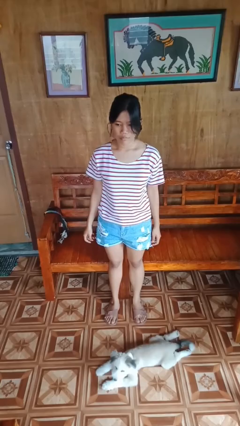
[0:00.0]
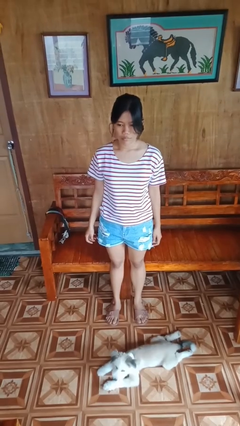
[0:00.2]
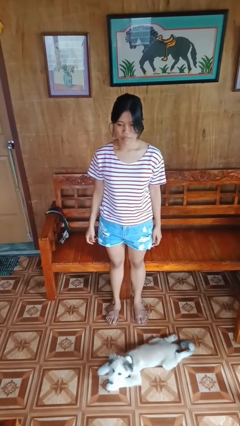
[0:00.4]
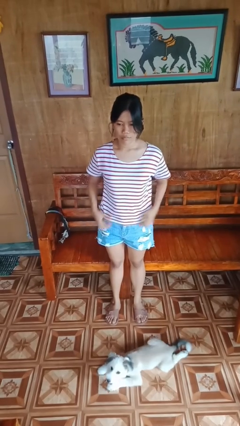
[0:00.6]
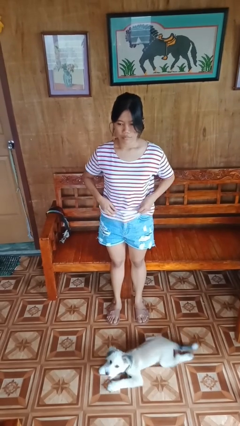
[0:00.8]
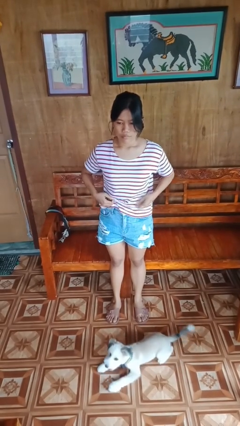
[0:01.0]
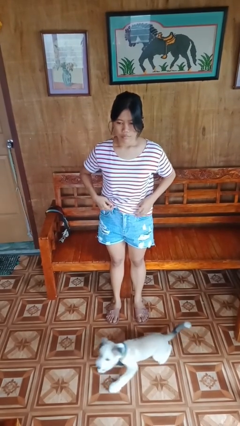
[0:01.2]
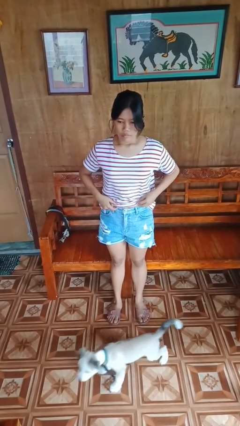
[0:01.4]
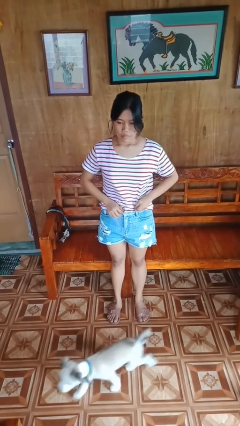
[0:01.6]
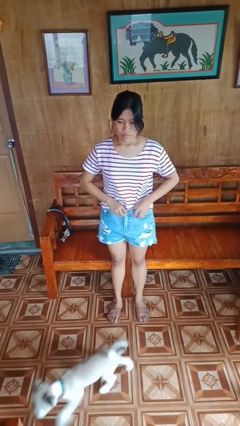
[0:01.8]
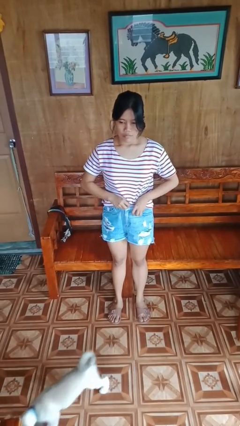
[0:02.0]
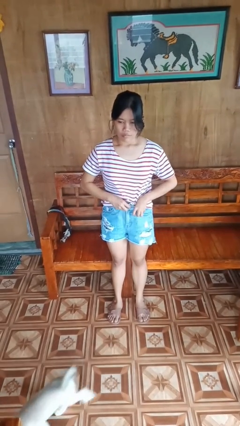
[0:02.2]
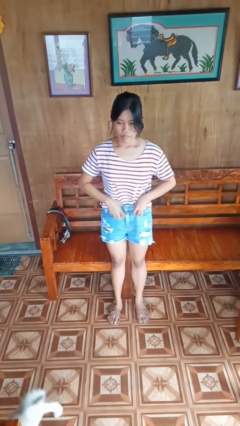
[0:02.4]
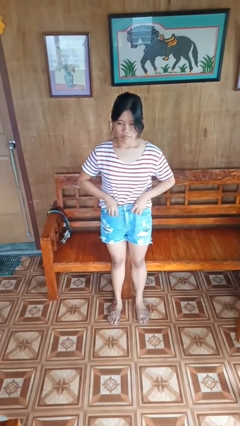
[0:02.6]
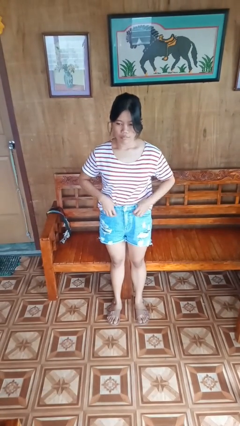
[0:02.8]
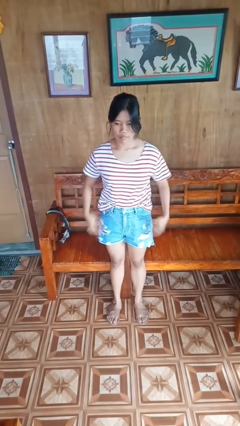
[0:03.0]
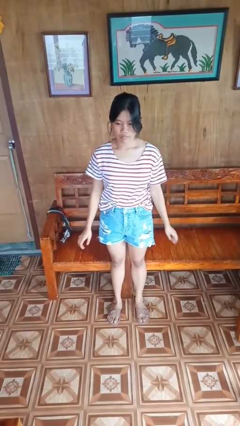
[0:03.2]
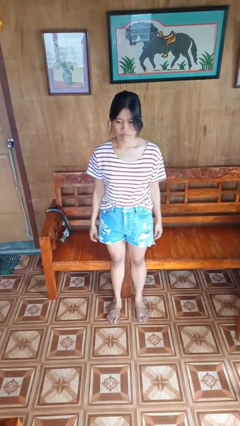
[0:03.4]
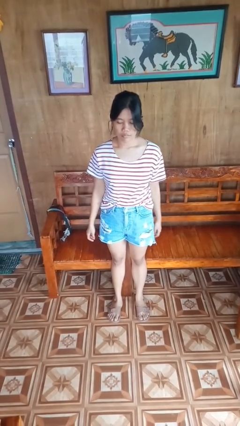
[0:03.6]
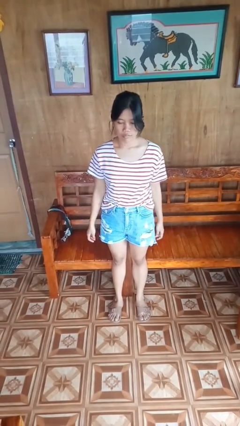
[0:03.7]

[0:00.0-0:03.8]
person tucks in shirt

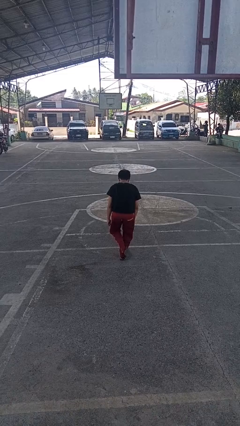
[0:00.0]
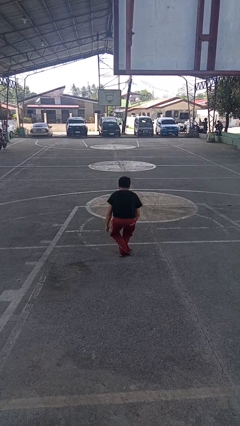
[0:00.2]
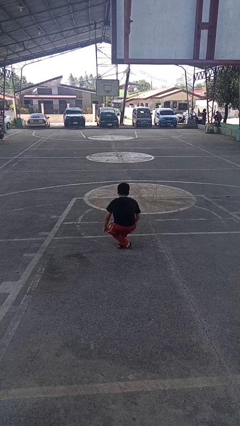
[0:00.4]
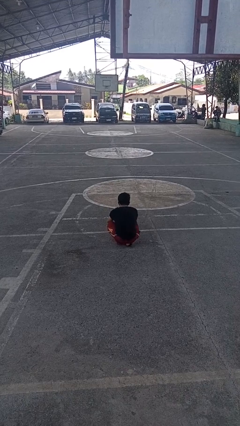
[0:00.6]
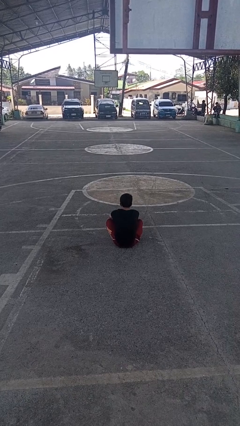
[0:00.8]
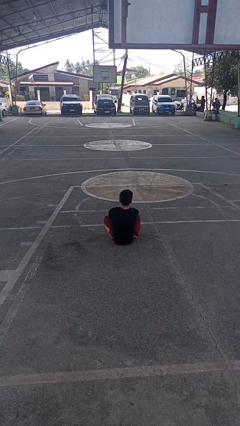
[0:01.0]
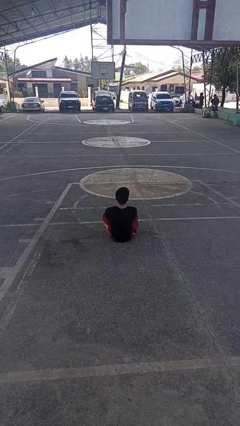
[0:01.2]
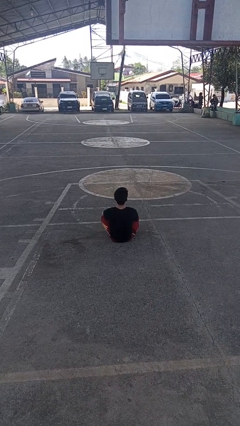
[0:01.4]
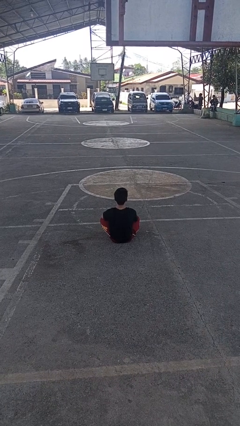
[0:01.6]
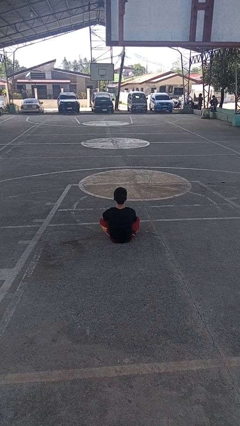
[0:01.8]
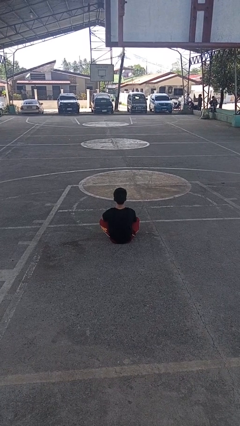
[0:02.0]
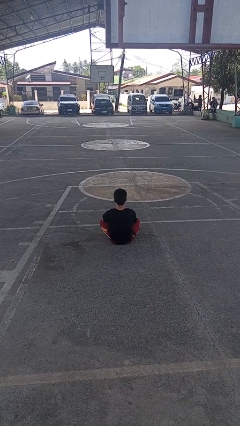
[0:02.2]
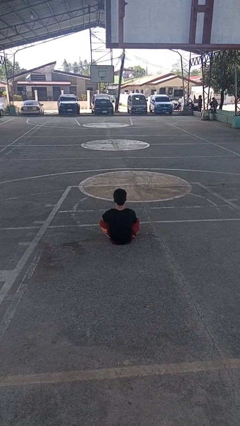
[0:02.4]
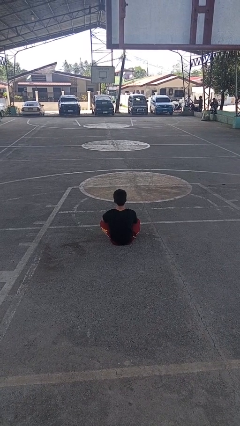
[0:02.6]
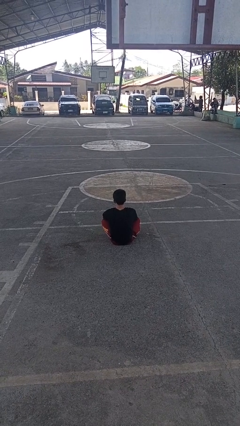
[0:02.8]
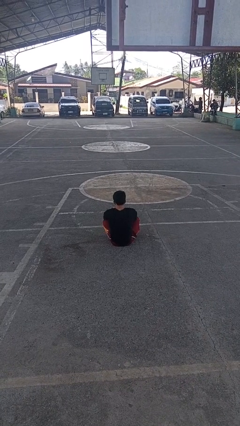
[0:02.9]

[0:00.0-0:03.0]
person sits crisscross

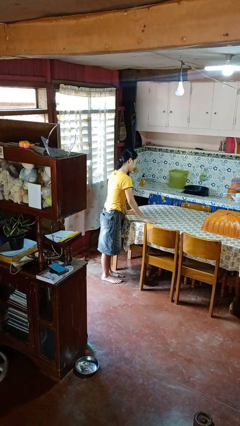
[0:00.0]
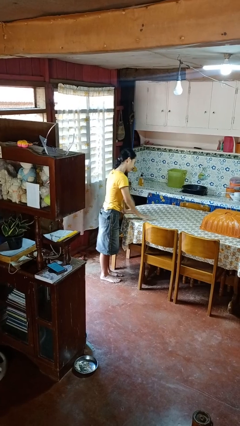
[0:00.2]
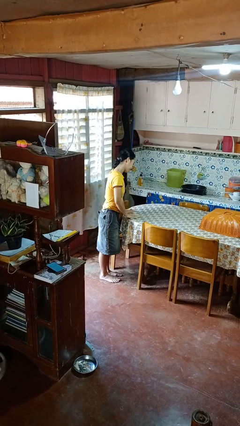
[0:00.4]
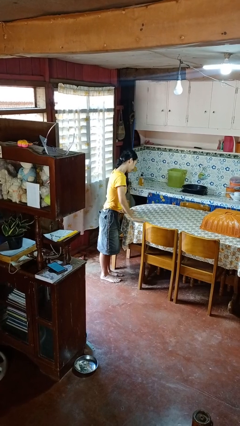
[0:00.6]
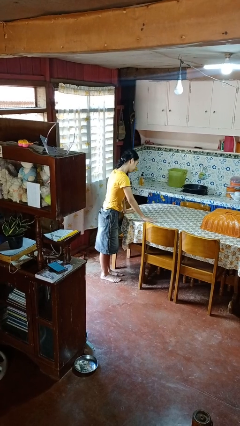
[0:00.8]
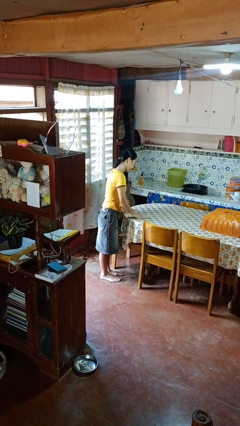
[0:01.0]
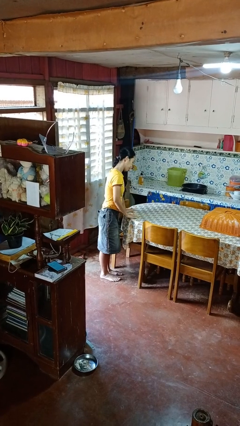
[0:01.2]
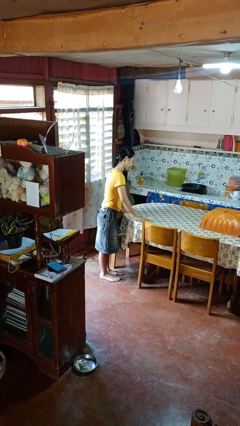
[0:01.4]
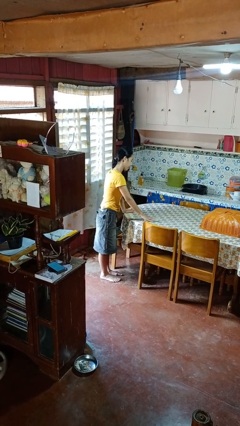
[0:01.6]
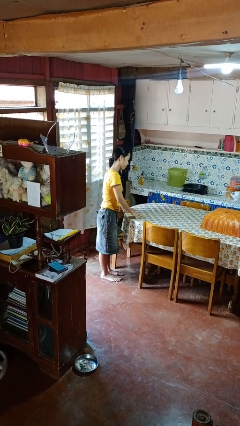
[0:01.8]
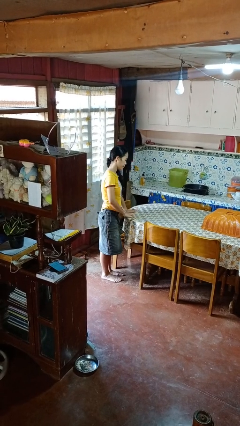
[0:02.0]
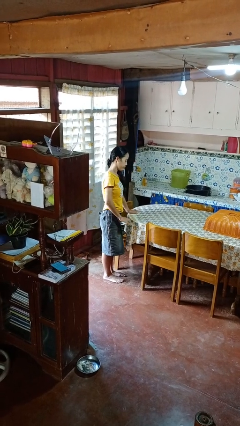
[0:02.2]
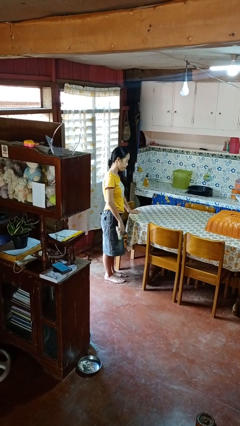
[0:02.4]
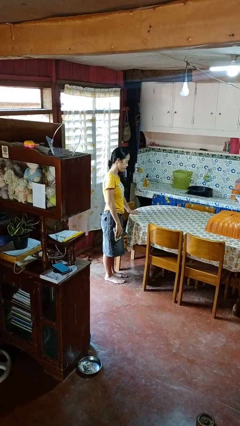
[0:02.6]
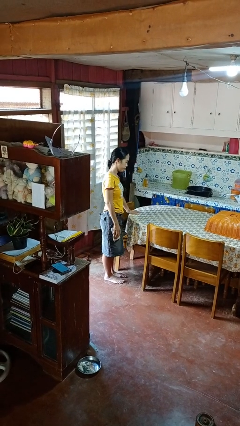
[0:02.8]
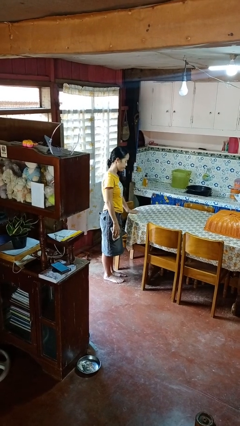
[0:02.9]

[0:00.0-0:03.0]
person cleans table with rag

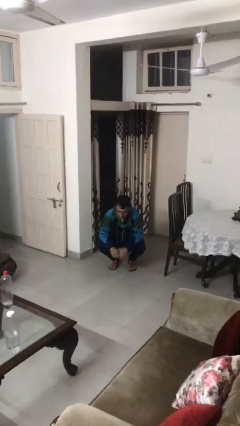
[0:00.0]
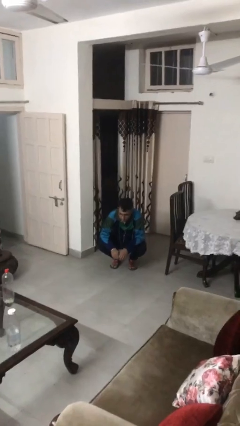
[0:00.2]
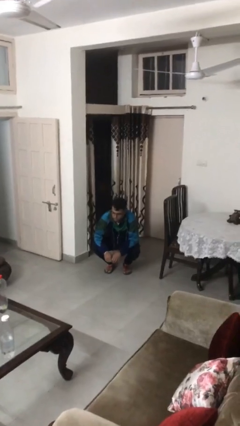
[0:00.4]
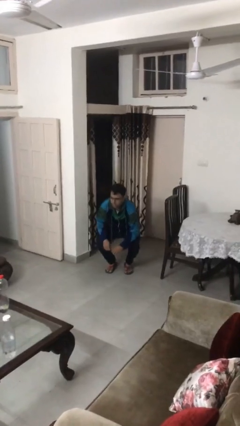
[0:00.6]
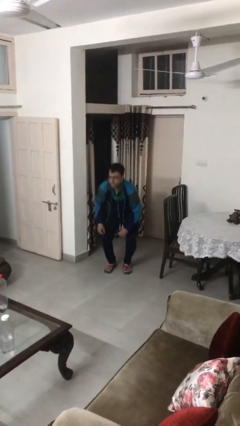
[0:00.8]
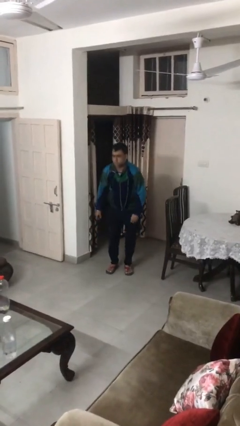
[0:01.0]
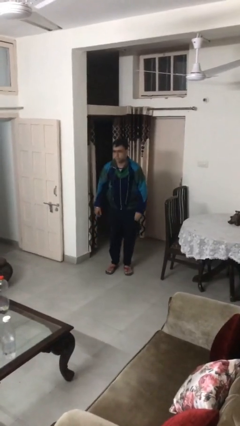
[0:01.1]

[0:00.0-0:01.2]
person stands up

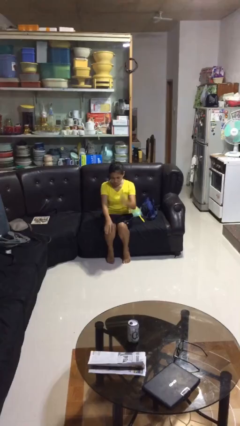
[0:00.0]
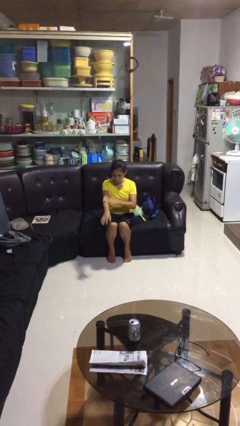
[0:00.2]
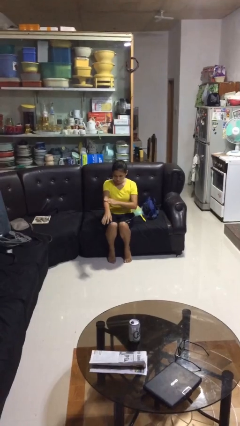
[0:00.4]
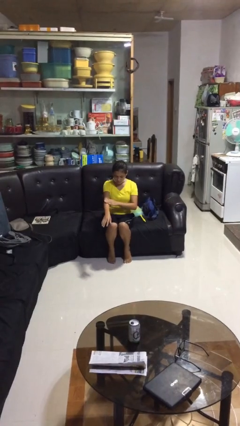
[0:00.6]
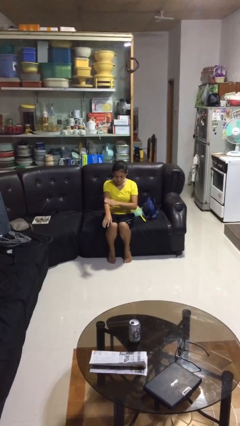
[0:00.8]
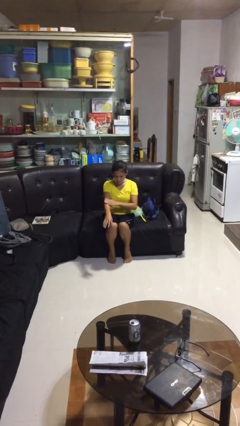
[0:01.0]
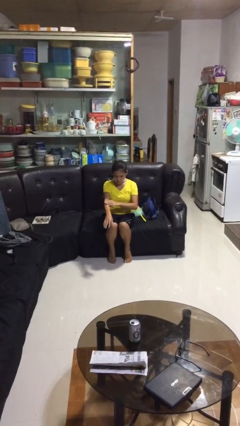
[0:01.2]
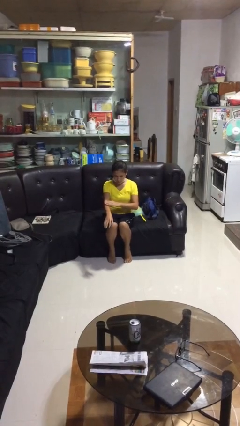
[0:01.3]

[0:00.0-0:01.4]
person swats bug

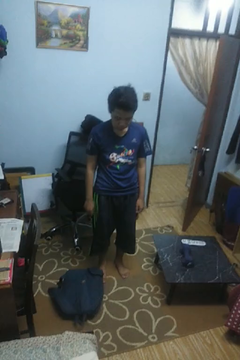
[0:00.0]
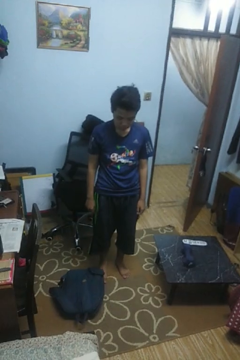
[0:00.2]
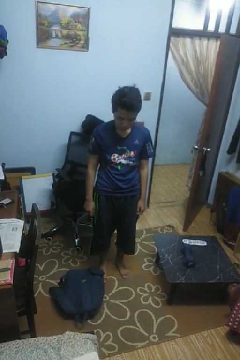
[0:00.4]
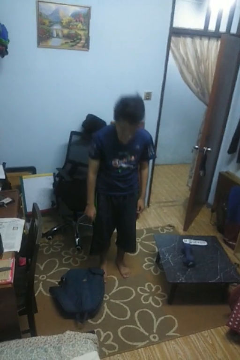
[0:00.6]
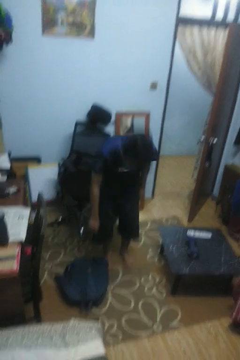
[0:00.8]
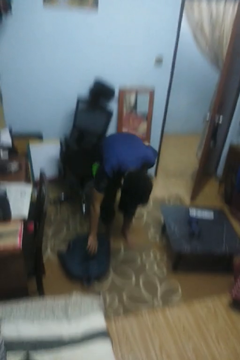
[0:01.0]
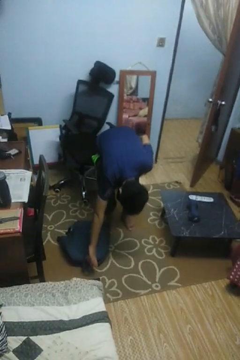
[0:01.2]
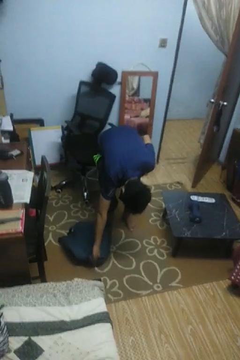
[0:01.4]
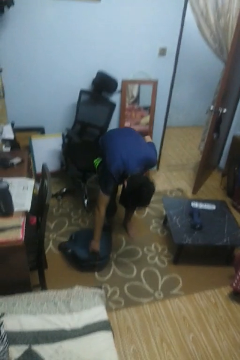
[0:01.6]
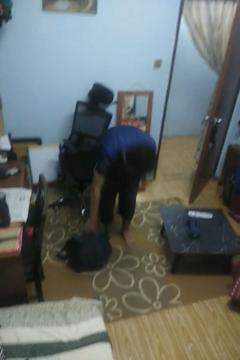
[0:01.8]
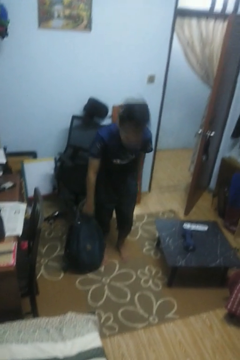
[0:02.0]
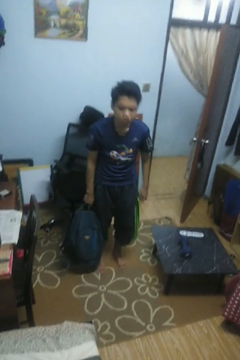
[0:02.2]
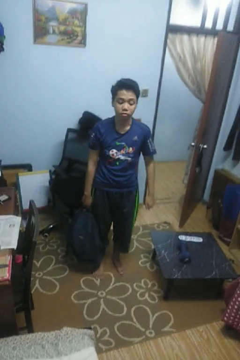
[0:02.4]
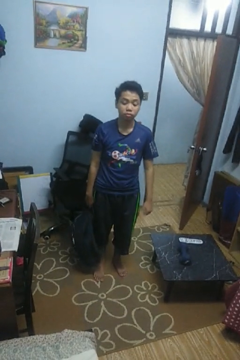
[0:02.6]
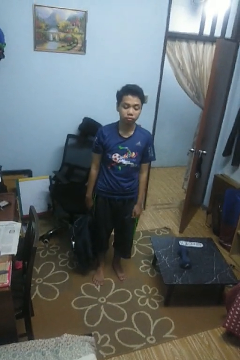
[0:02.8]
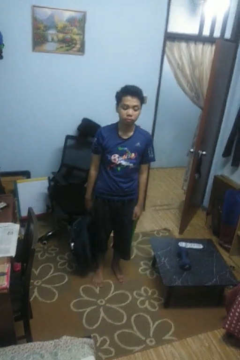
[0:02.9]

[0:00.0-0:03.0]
person picks up object from floor

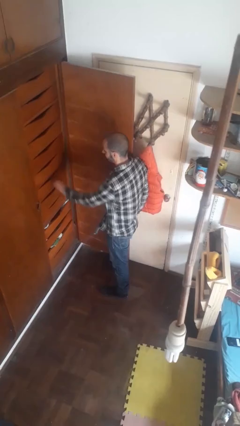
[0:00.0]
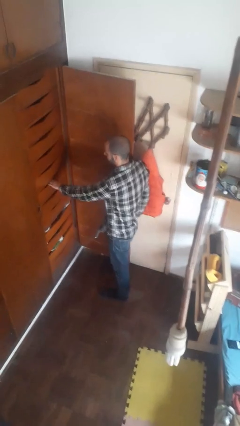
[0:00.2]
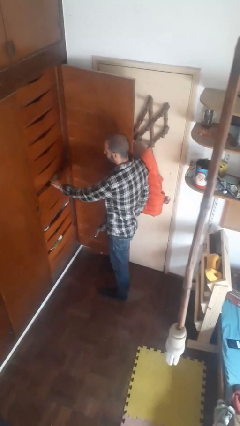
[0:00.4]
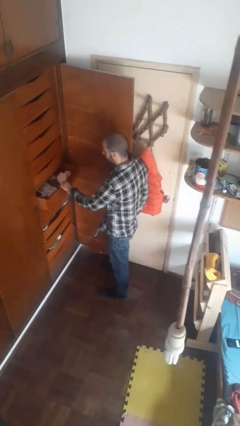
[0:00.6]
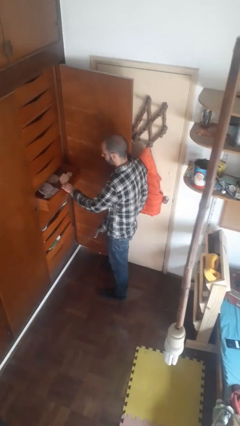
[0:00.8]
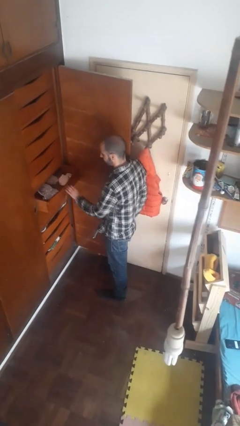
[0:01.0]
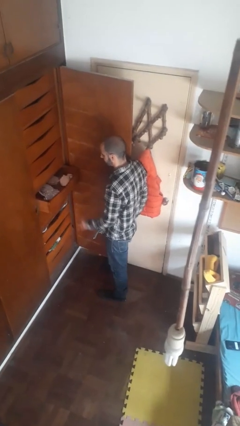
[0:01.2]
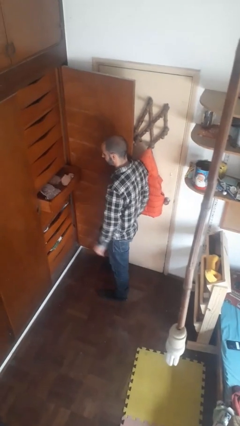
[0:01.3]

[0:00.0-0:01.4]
person opens dresser drawer

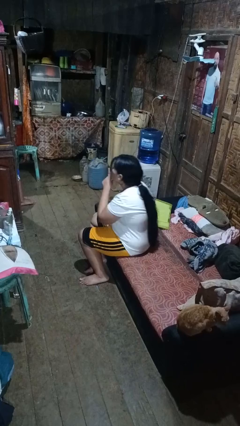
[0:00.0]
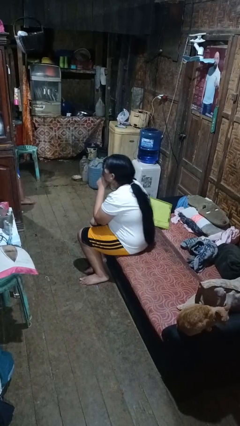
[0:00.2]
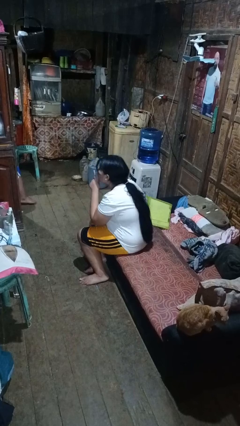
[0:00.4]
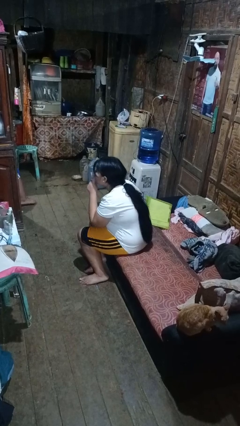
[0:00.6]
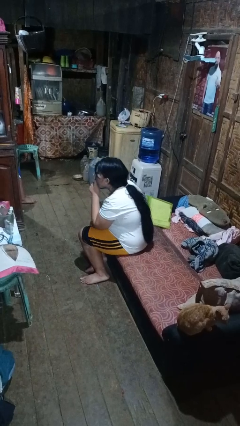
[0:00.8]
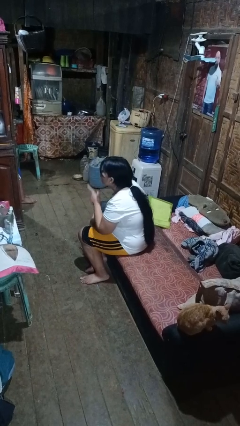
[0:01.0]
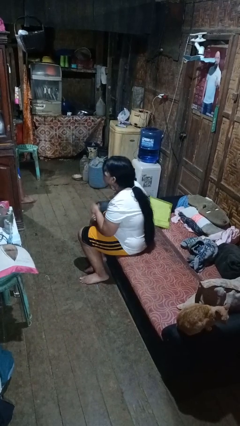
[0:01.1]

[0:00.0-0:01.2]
person gestures be quiet
